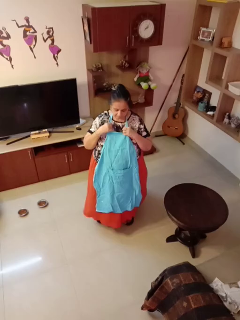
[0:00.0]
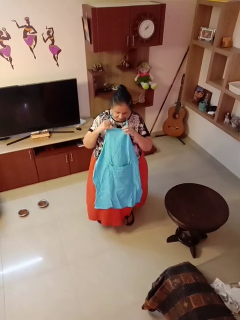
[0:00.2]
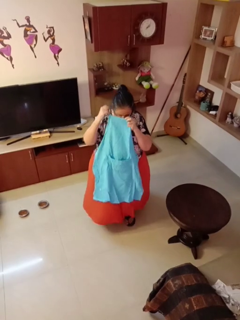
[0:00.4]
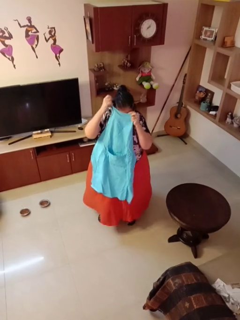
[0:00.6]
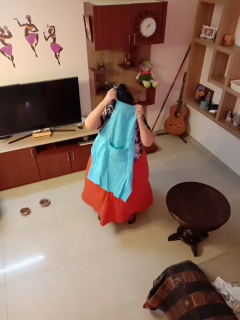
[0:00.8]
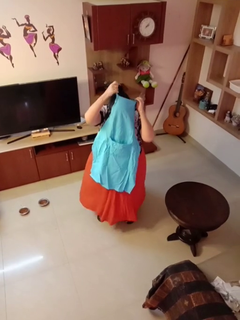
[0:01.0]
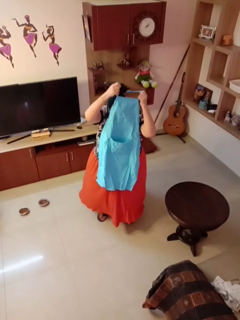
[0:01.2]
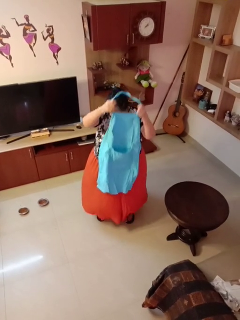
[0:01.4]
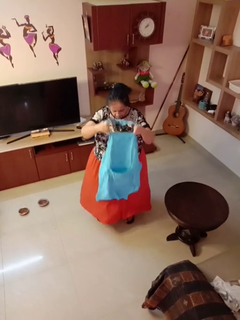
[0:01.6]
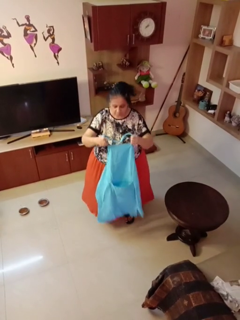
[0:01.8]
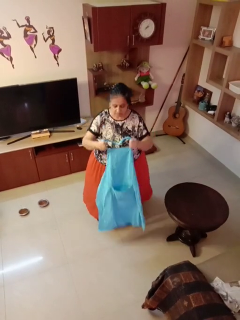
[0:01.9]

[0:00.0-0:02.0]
person takes off apron

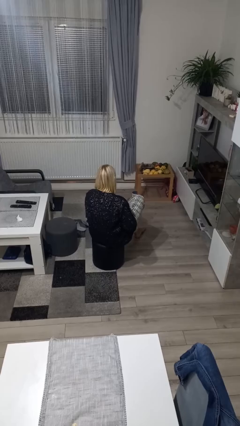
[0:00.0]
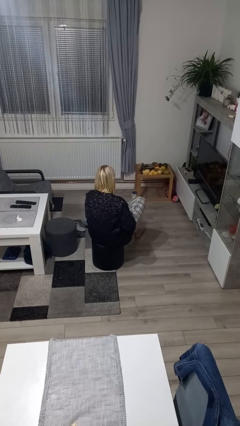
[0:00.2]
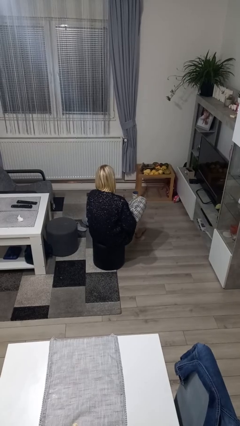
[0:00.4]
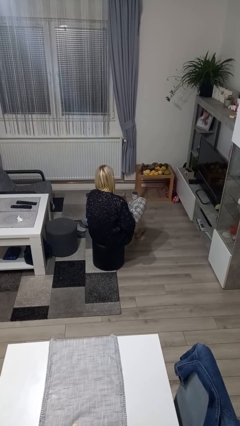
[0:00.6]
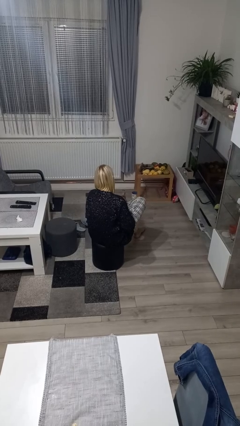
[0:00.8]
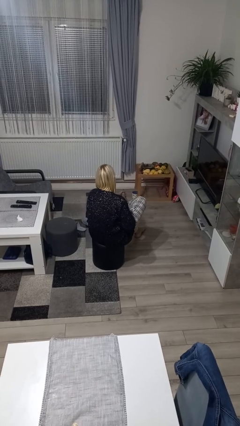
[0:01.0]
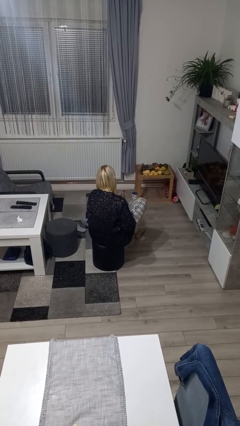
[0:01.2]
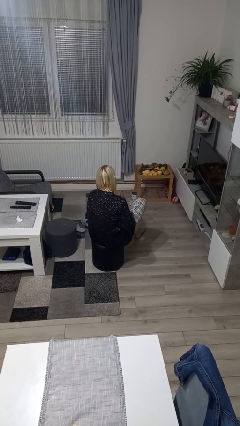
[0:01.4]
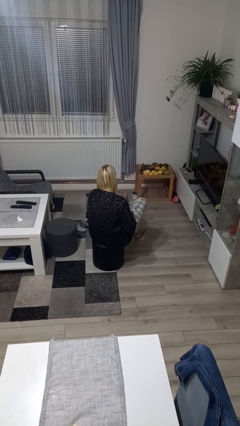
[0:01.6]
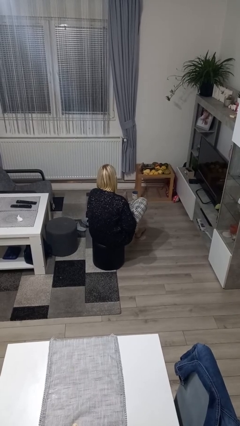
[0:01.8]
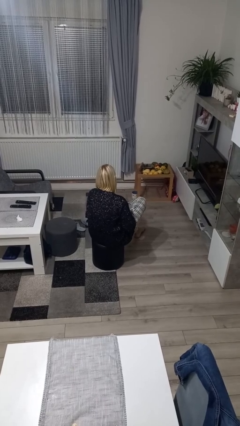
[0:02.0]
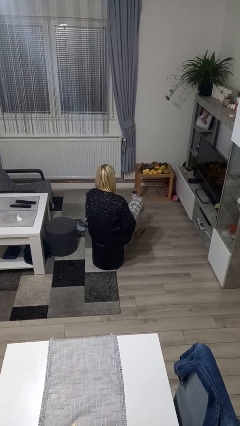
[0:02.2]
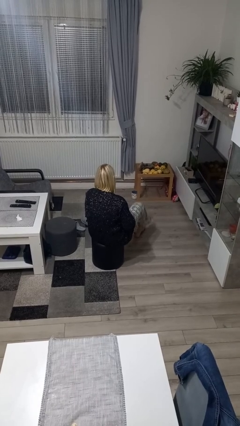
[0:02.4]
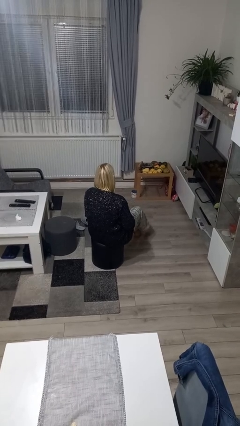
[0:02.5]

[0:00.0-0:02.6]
person rubs foot

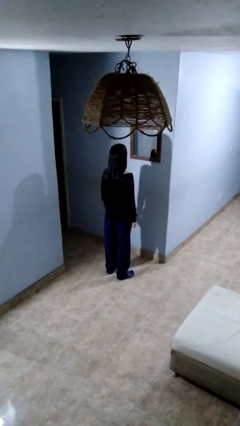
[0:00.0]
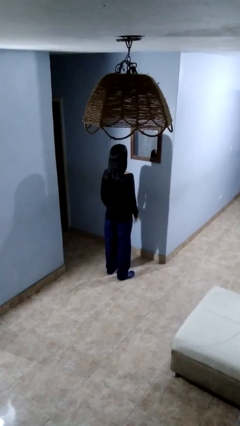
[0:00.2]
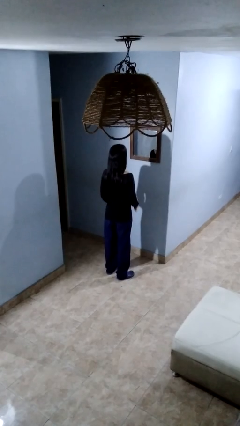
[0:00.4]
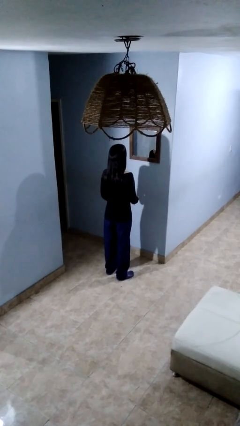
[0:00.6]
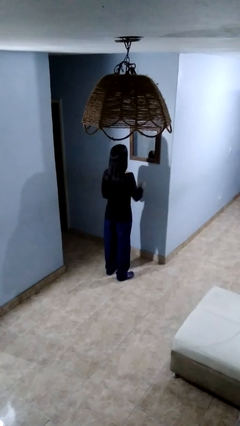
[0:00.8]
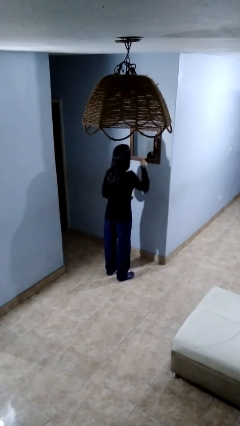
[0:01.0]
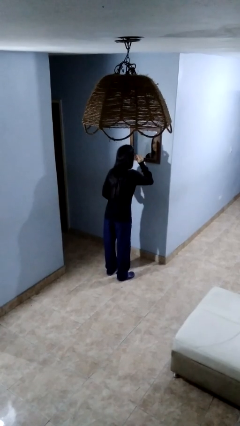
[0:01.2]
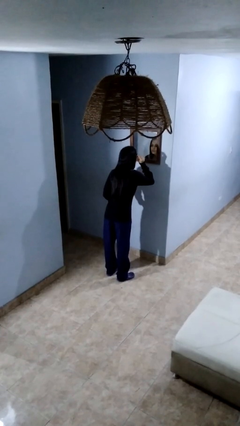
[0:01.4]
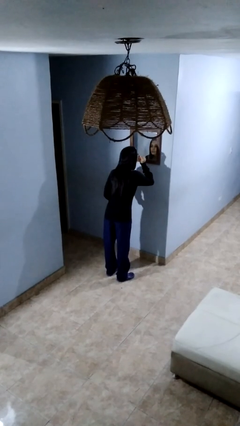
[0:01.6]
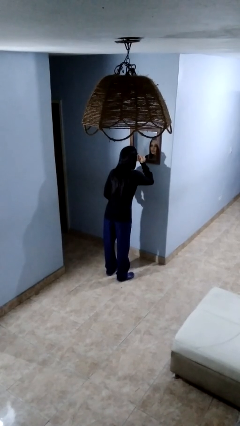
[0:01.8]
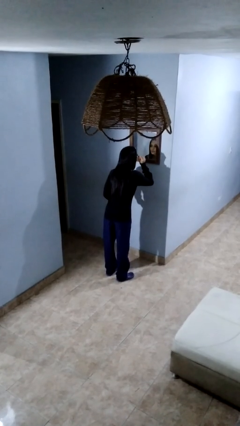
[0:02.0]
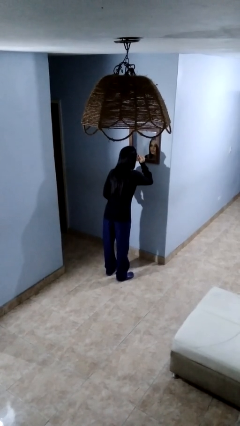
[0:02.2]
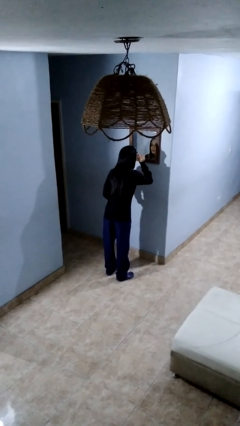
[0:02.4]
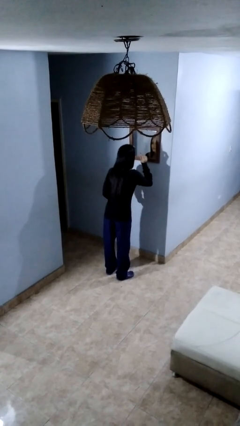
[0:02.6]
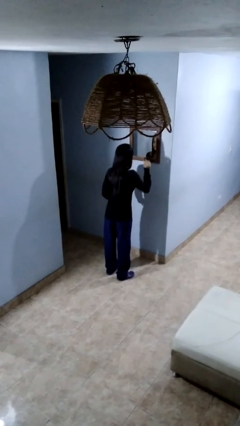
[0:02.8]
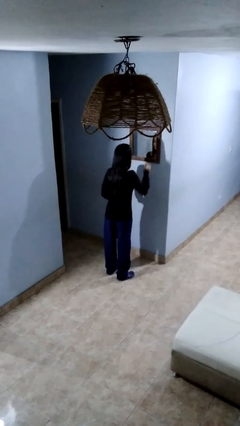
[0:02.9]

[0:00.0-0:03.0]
person applies eye makeup

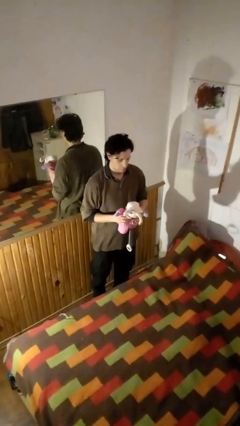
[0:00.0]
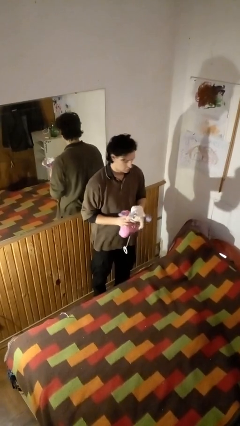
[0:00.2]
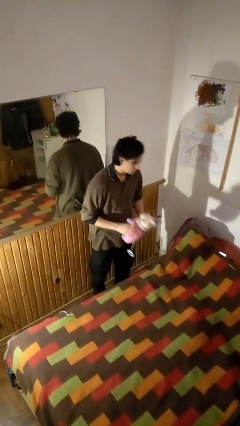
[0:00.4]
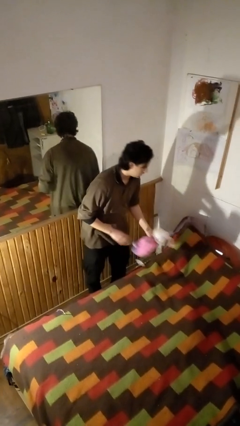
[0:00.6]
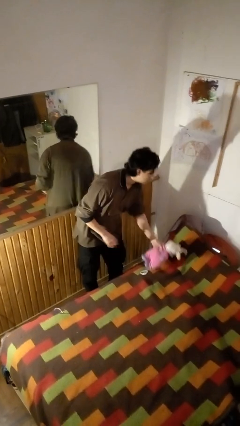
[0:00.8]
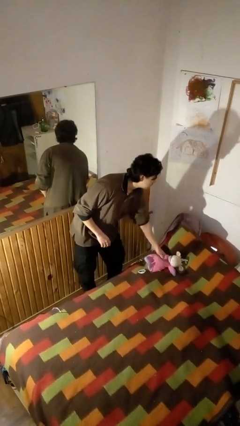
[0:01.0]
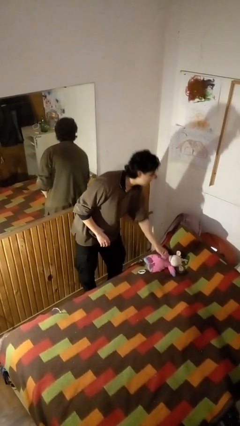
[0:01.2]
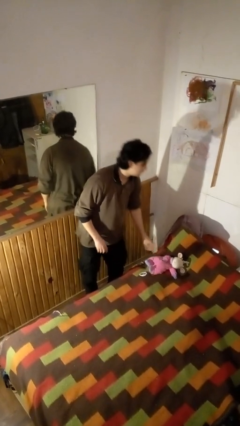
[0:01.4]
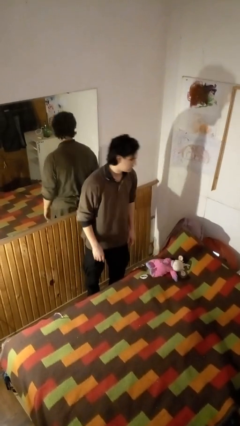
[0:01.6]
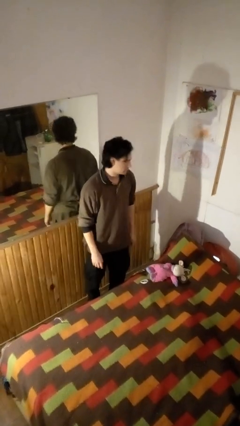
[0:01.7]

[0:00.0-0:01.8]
person puts down object on bed

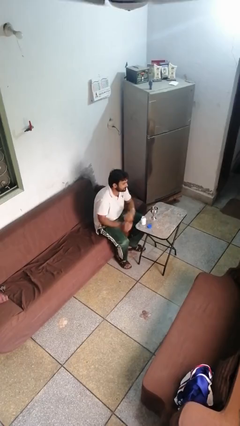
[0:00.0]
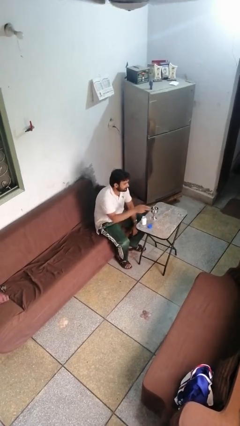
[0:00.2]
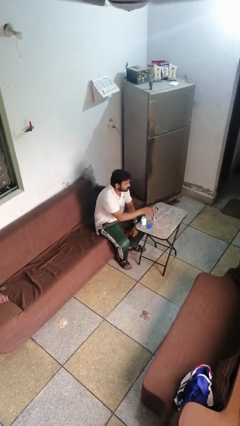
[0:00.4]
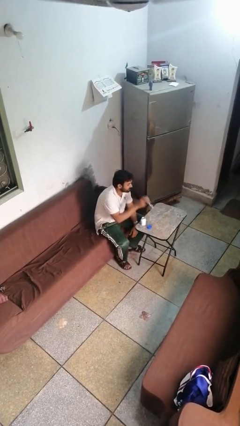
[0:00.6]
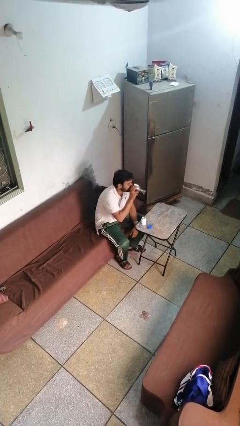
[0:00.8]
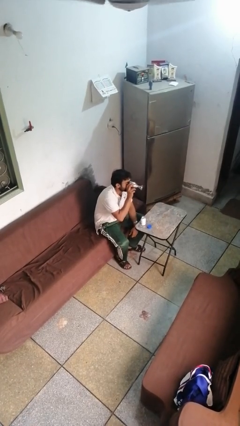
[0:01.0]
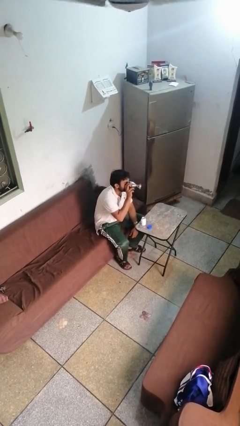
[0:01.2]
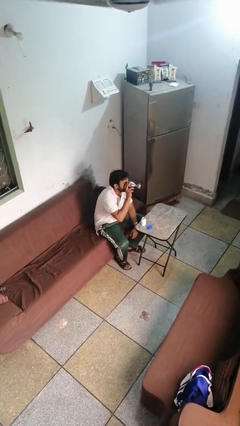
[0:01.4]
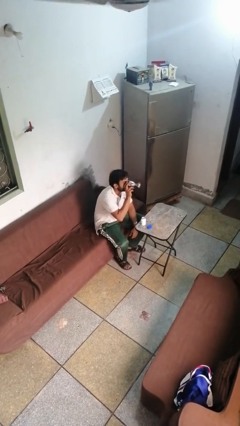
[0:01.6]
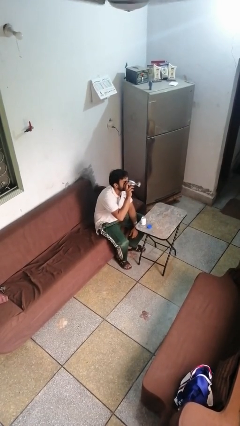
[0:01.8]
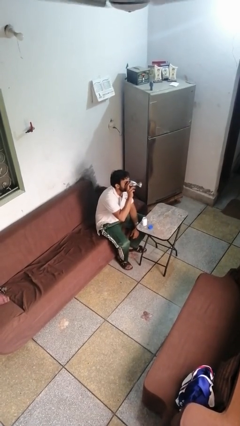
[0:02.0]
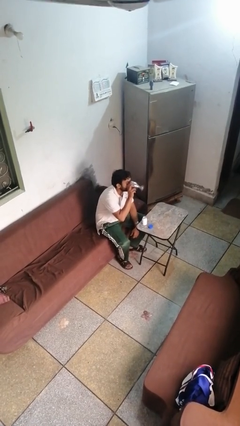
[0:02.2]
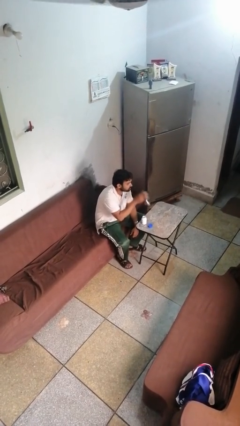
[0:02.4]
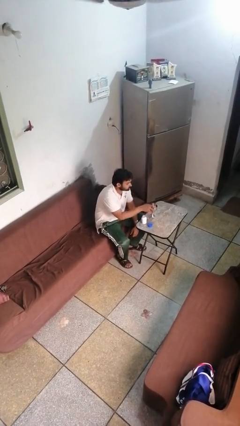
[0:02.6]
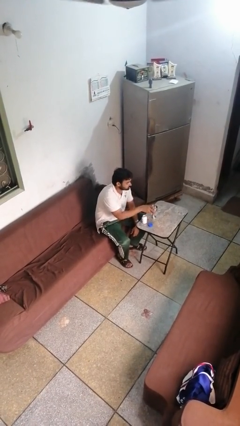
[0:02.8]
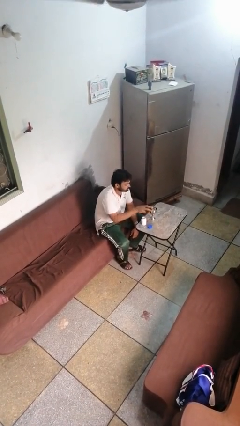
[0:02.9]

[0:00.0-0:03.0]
person drinks from cup

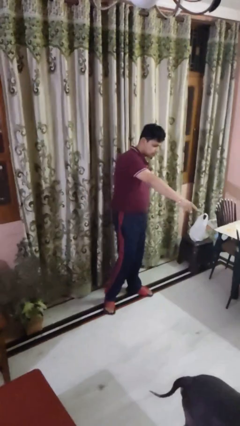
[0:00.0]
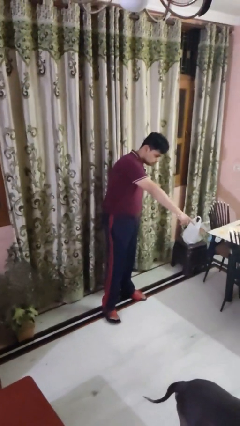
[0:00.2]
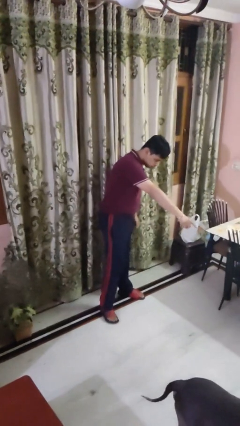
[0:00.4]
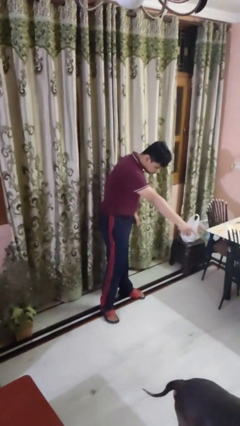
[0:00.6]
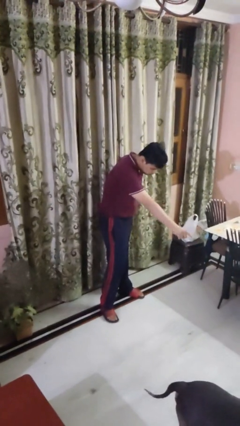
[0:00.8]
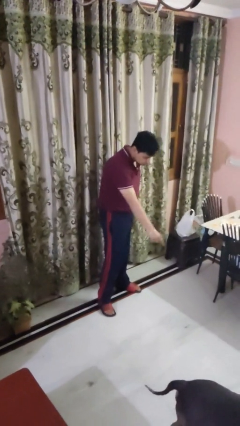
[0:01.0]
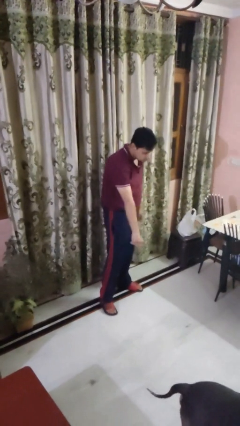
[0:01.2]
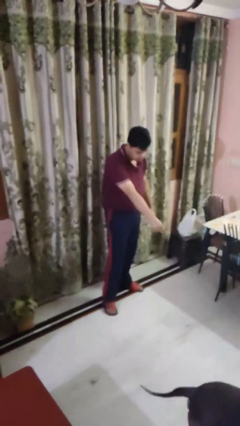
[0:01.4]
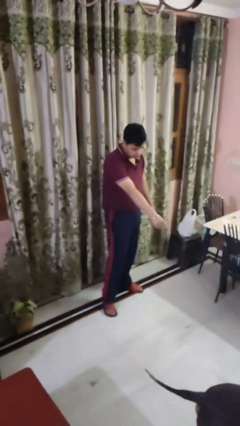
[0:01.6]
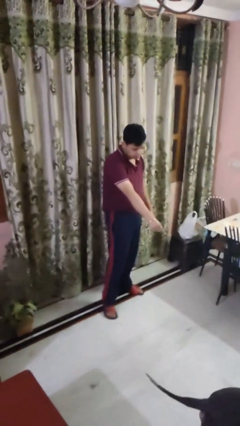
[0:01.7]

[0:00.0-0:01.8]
person points to dog

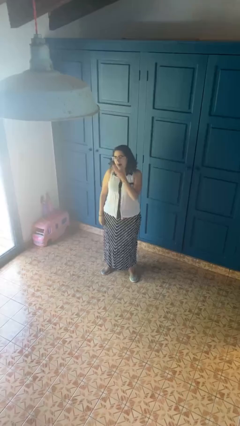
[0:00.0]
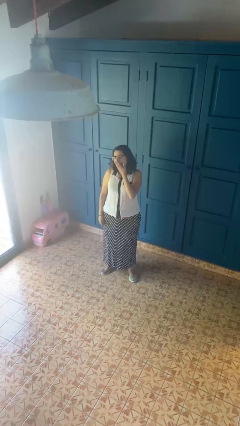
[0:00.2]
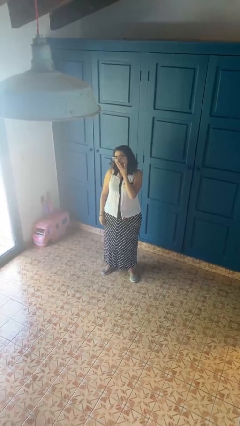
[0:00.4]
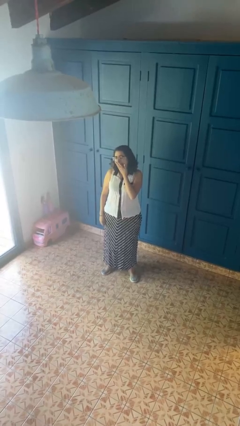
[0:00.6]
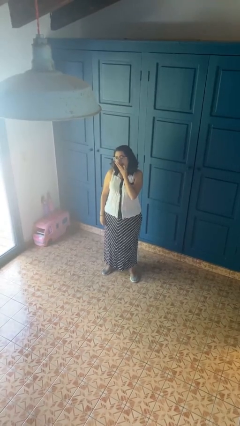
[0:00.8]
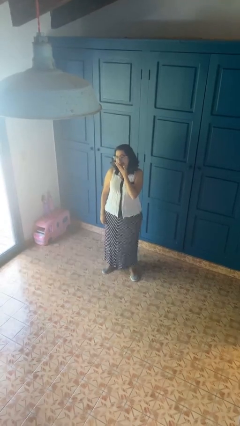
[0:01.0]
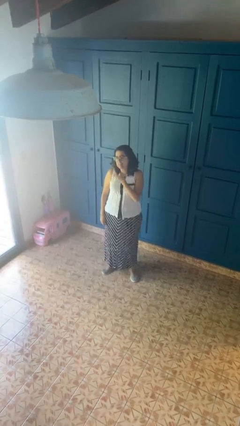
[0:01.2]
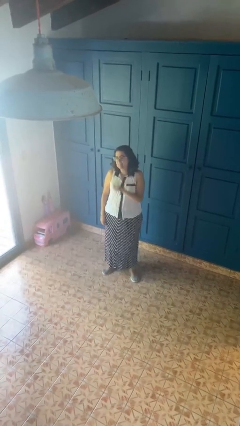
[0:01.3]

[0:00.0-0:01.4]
person yawns

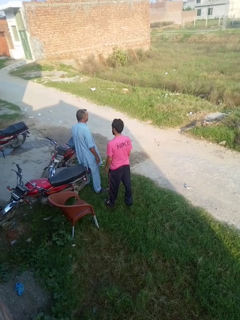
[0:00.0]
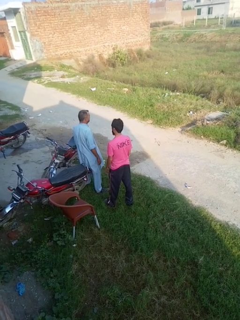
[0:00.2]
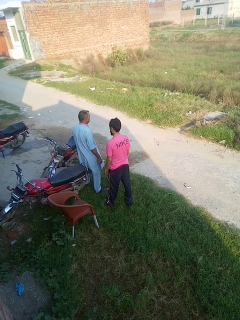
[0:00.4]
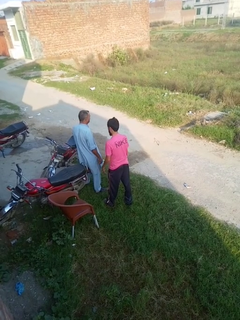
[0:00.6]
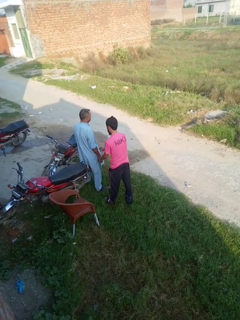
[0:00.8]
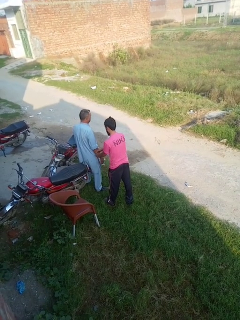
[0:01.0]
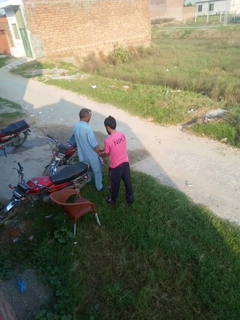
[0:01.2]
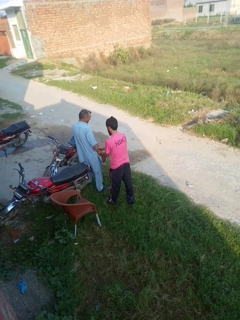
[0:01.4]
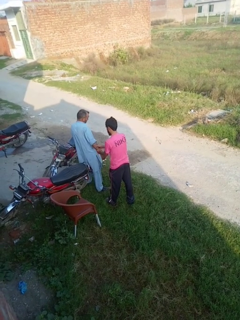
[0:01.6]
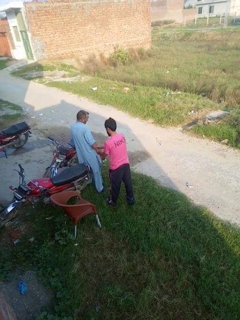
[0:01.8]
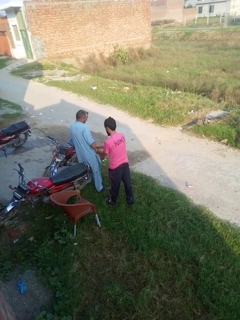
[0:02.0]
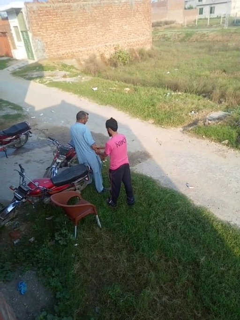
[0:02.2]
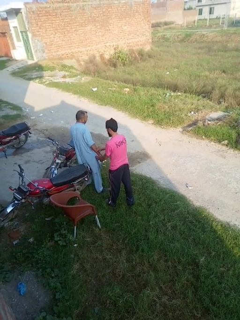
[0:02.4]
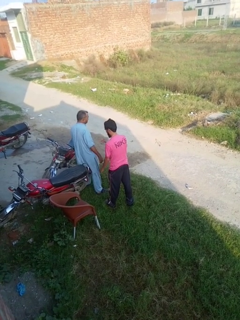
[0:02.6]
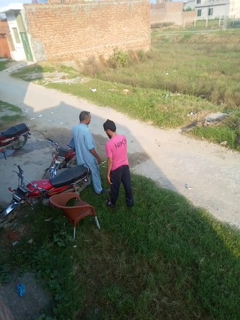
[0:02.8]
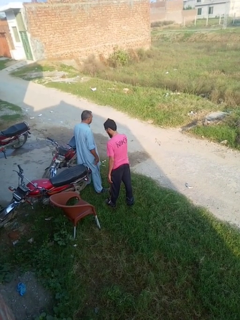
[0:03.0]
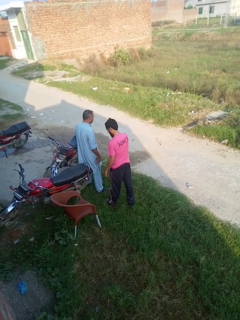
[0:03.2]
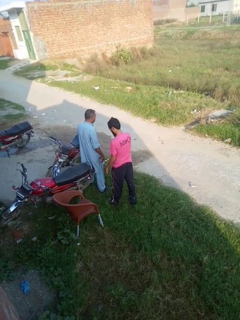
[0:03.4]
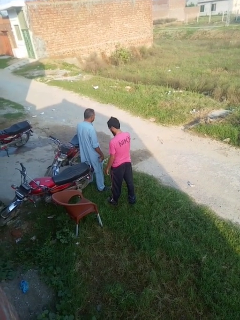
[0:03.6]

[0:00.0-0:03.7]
person grabs person by forearm
